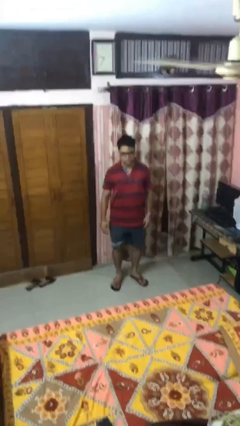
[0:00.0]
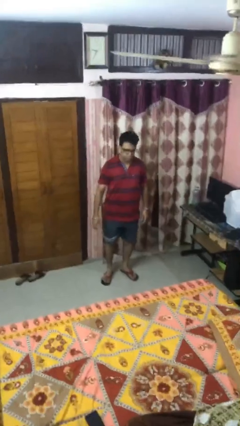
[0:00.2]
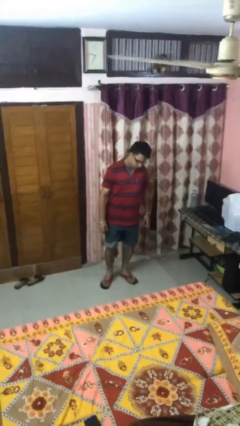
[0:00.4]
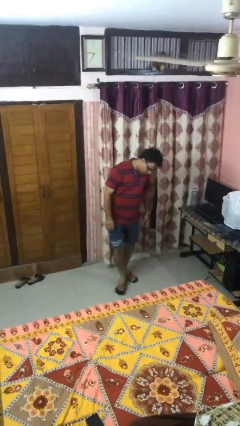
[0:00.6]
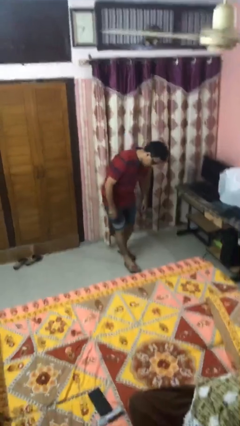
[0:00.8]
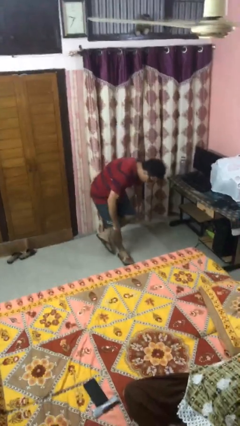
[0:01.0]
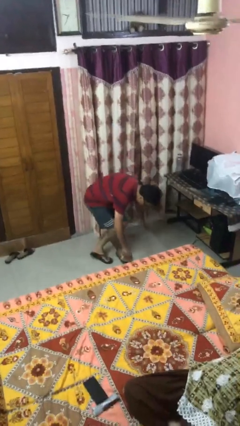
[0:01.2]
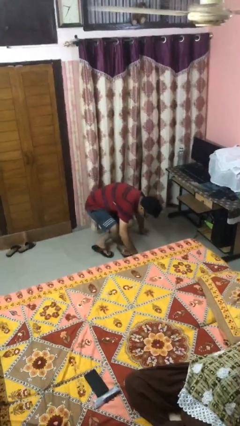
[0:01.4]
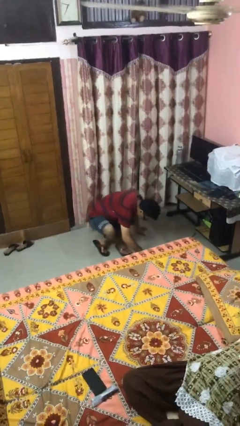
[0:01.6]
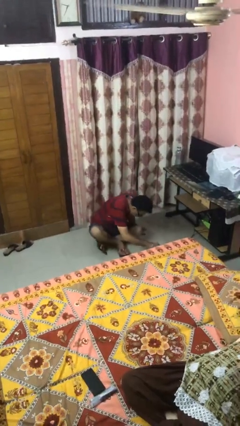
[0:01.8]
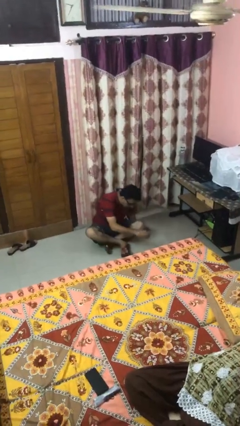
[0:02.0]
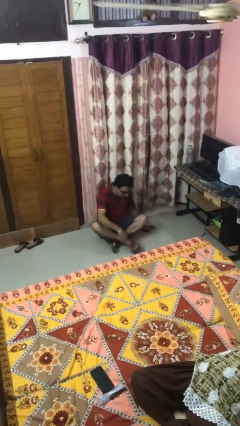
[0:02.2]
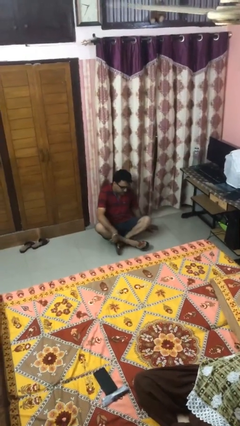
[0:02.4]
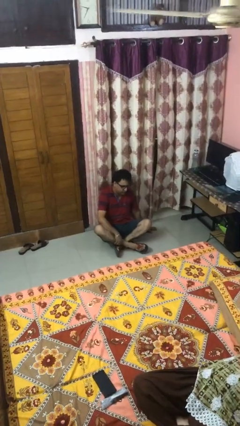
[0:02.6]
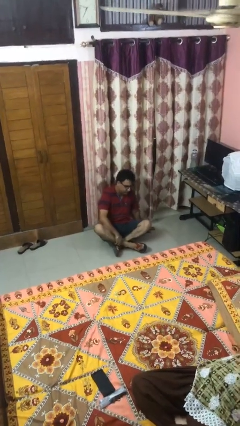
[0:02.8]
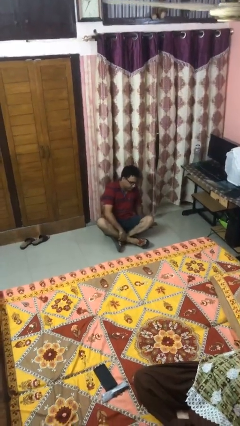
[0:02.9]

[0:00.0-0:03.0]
person sits crisscross

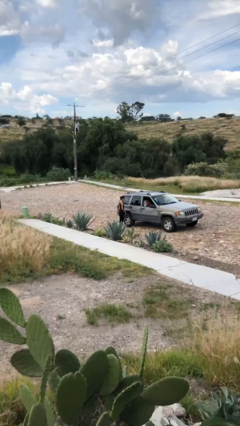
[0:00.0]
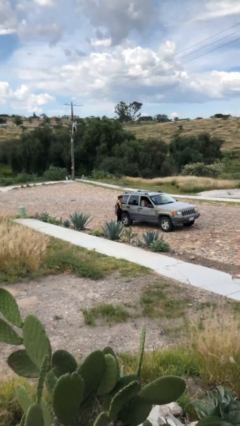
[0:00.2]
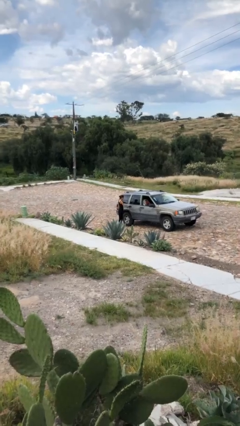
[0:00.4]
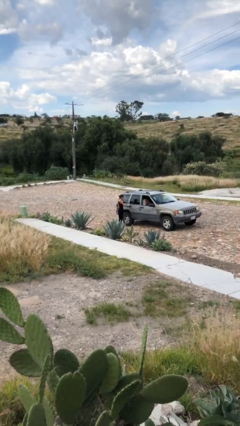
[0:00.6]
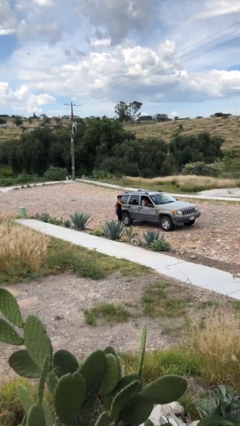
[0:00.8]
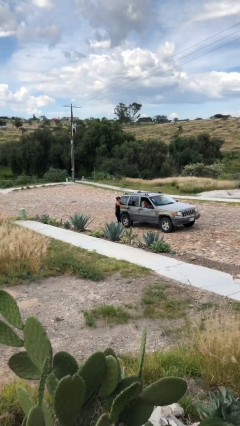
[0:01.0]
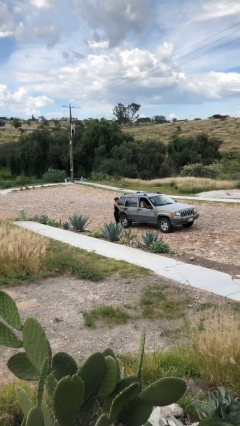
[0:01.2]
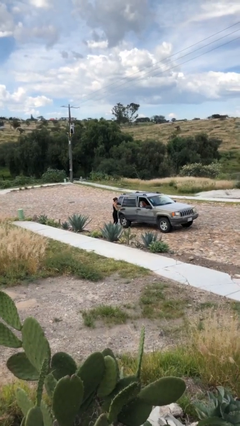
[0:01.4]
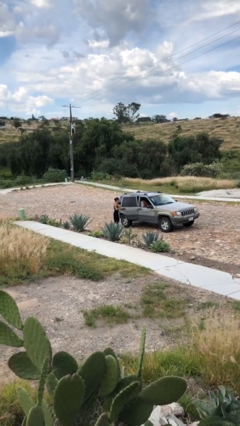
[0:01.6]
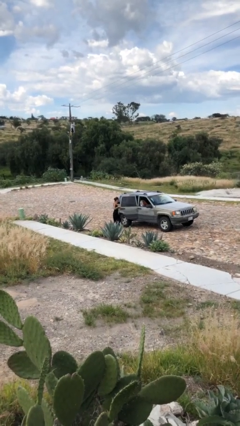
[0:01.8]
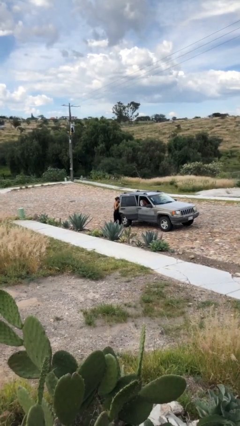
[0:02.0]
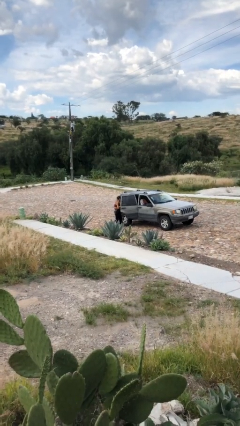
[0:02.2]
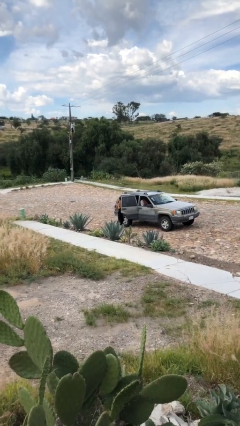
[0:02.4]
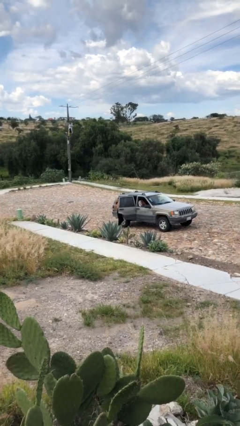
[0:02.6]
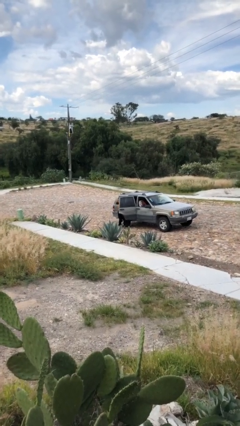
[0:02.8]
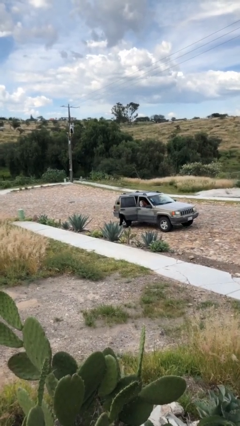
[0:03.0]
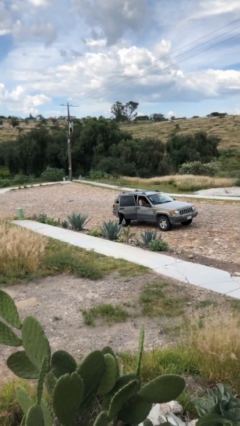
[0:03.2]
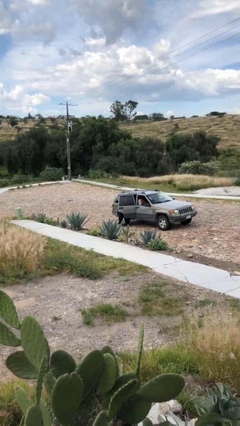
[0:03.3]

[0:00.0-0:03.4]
person opens car door

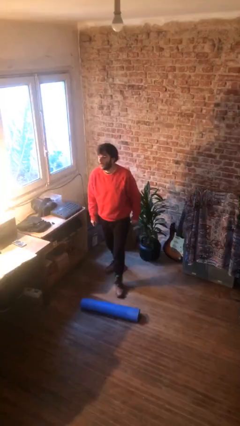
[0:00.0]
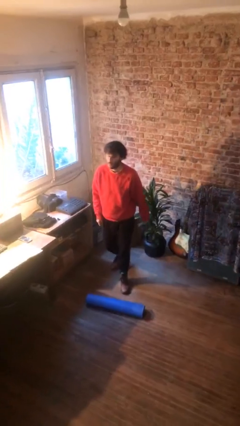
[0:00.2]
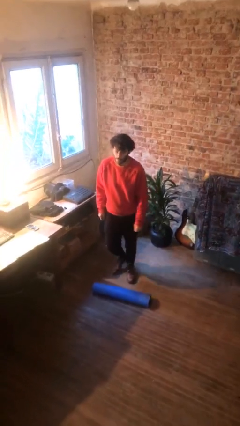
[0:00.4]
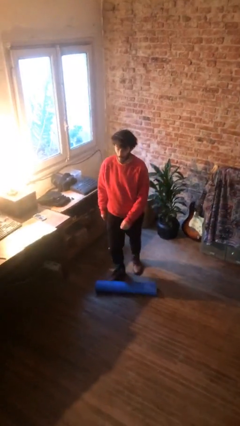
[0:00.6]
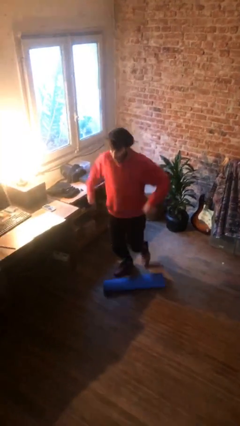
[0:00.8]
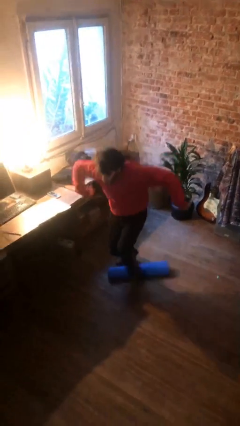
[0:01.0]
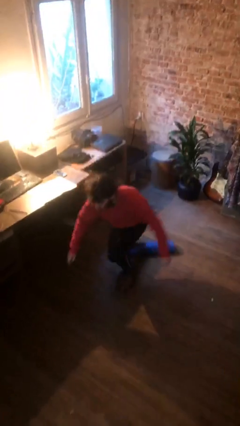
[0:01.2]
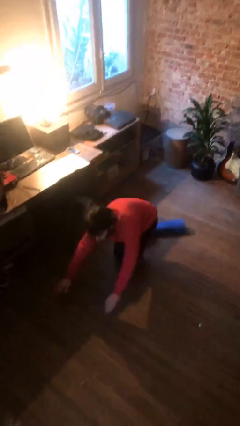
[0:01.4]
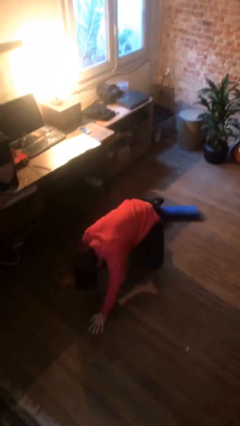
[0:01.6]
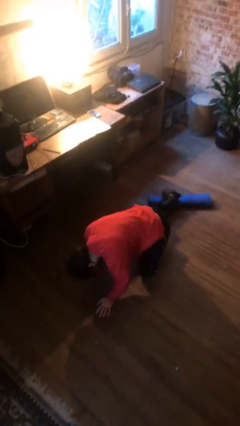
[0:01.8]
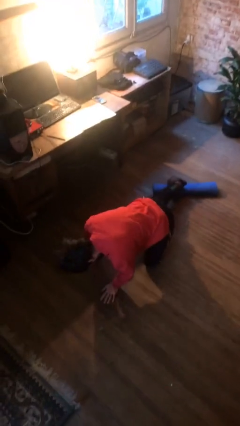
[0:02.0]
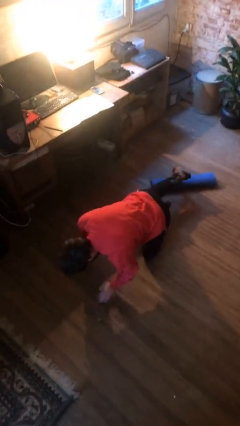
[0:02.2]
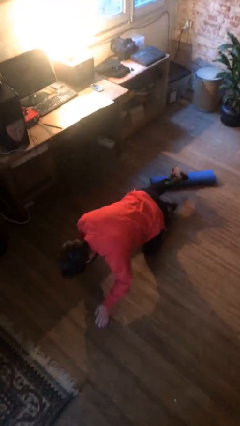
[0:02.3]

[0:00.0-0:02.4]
person trips on object on floor

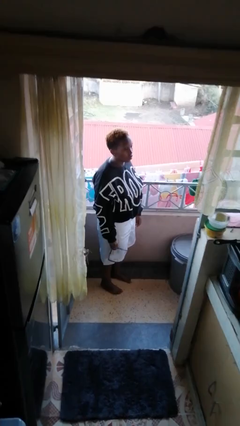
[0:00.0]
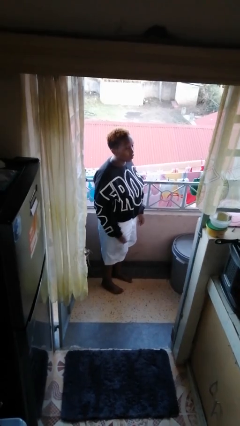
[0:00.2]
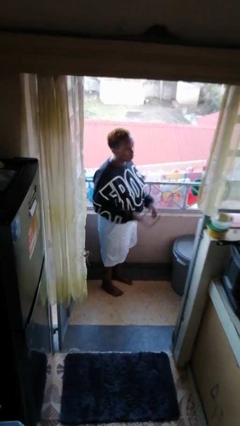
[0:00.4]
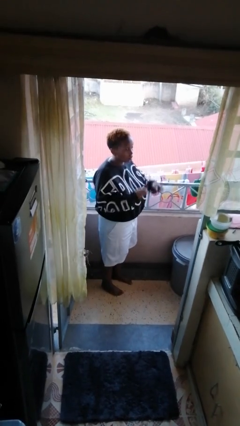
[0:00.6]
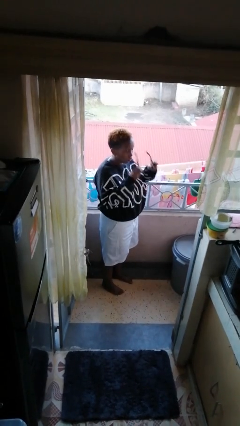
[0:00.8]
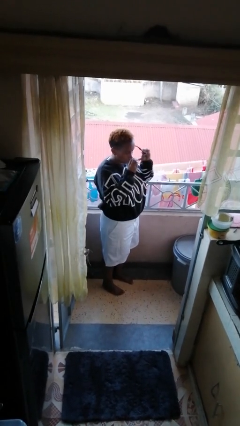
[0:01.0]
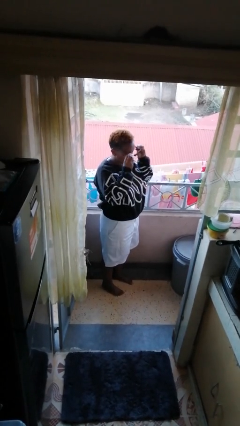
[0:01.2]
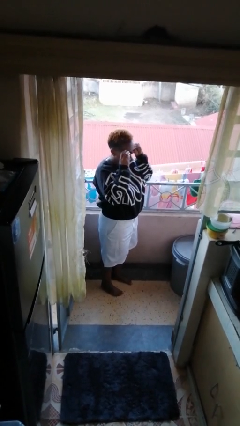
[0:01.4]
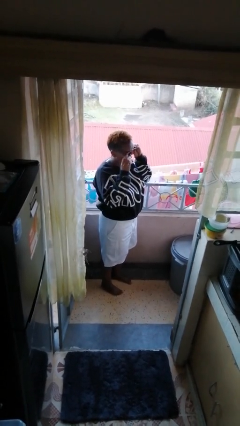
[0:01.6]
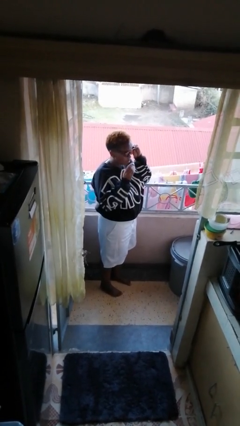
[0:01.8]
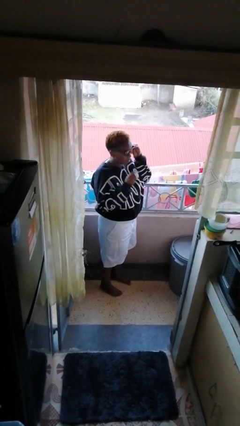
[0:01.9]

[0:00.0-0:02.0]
person puts on sunglasses

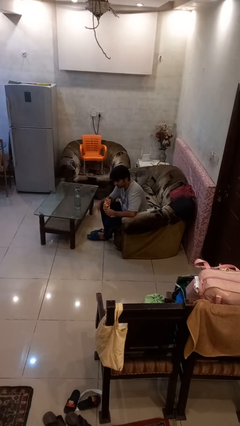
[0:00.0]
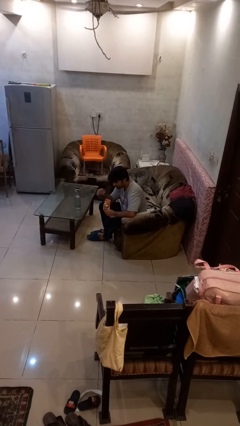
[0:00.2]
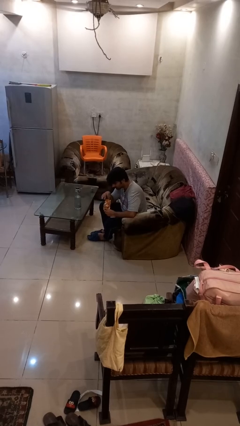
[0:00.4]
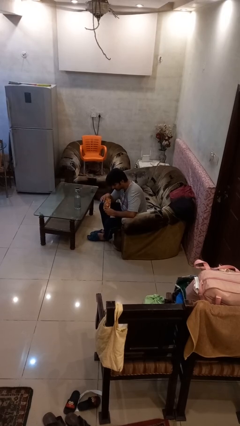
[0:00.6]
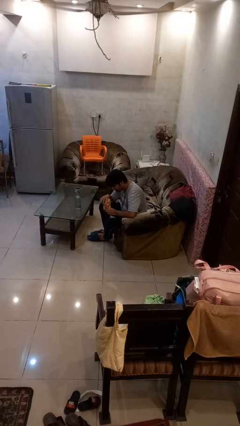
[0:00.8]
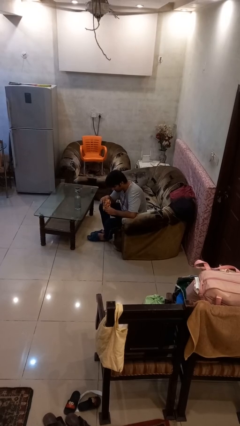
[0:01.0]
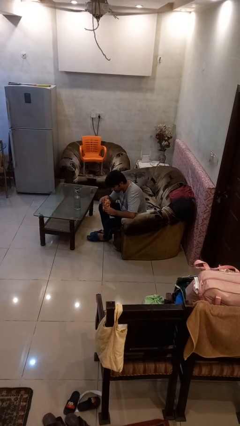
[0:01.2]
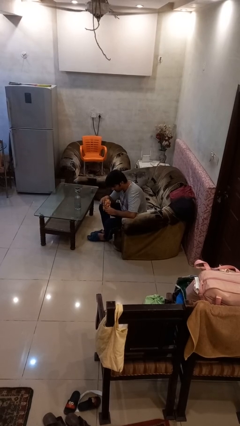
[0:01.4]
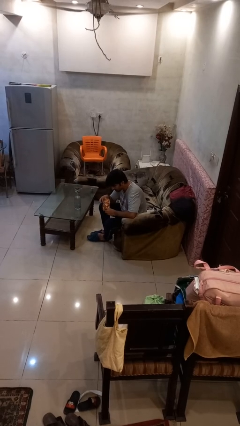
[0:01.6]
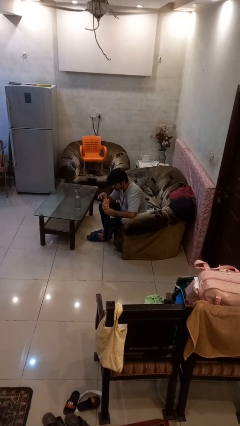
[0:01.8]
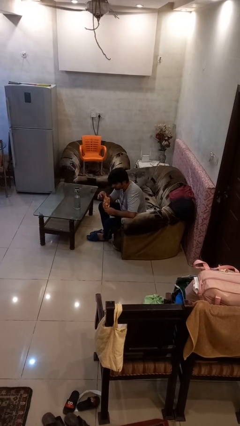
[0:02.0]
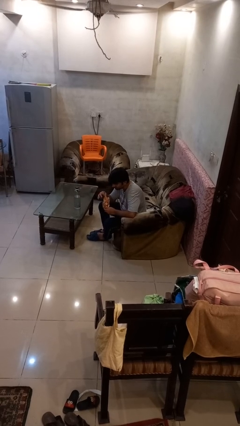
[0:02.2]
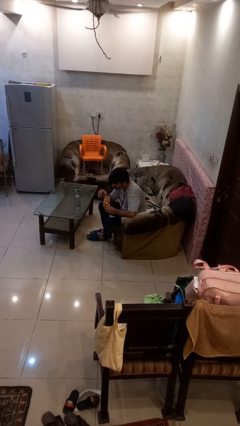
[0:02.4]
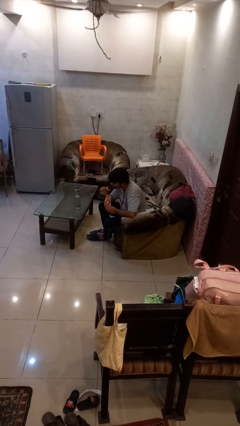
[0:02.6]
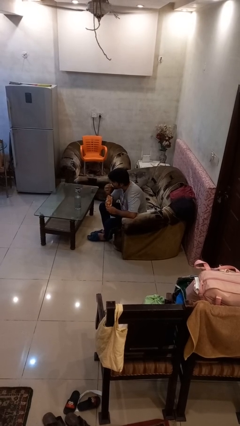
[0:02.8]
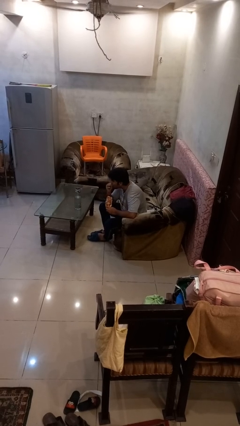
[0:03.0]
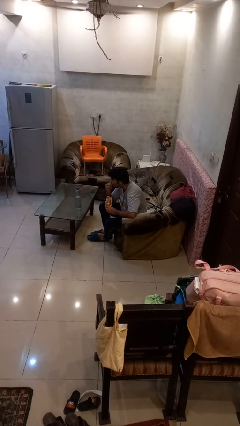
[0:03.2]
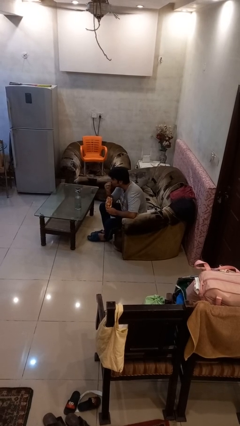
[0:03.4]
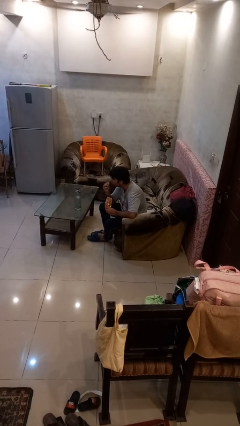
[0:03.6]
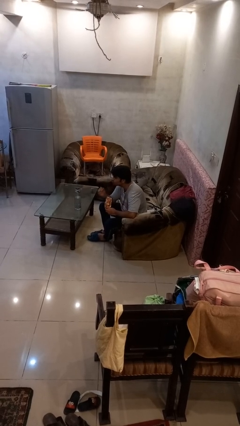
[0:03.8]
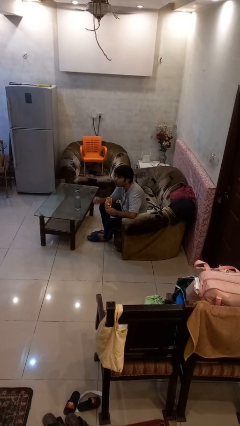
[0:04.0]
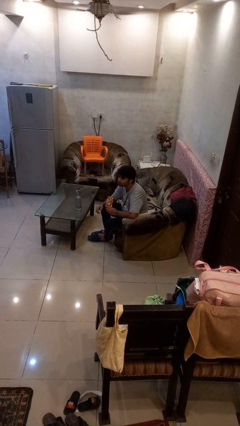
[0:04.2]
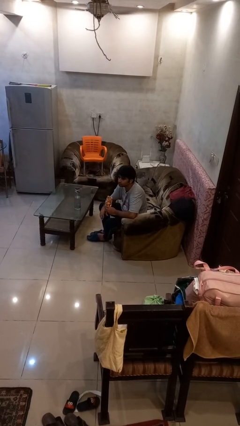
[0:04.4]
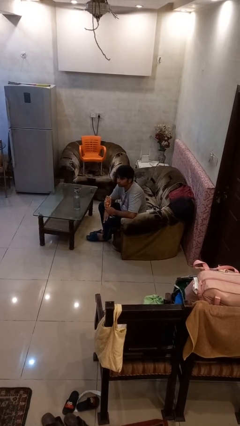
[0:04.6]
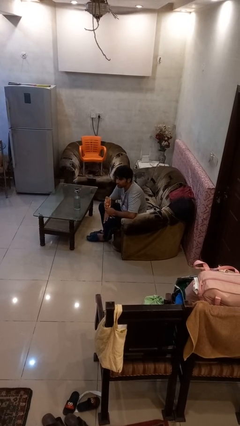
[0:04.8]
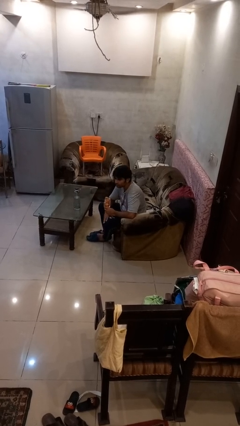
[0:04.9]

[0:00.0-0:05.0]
person eats snack from bag

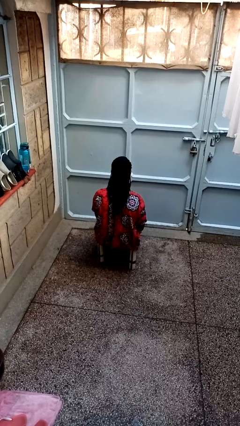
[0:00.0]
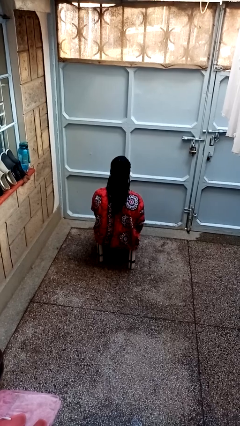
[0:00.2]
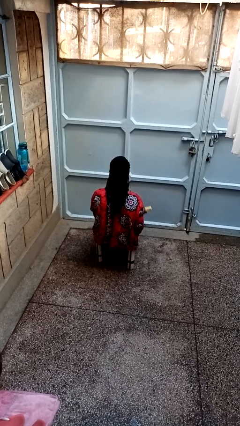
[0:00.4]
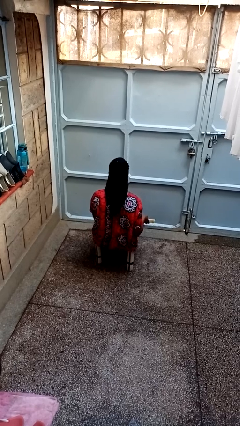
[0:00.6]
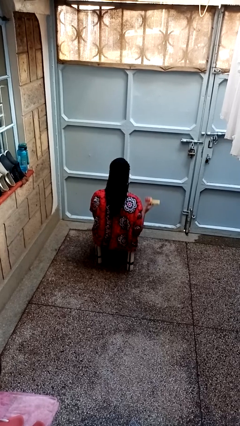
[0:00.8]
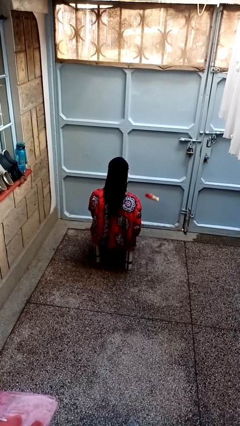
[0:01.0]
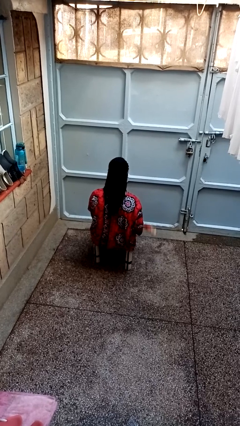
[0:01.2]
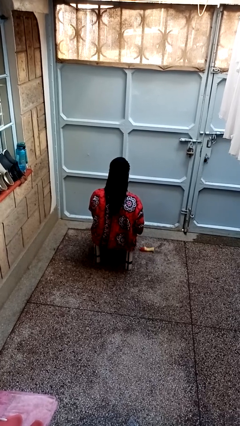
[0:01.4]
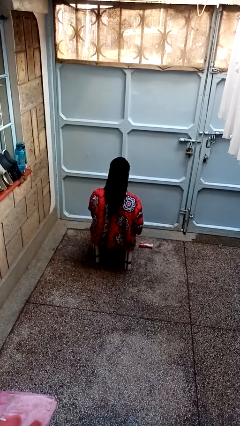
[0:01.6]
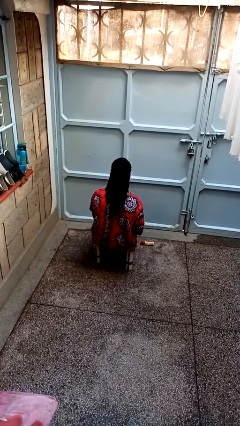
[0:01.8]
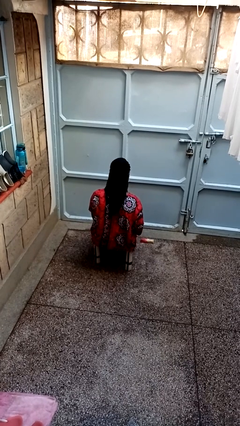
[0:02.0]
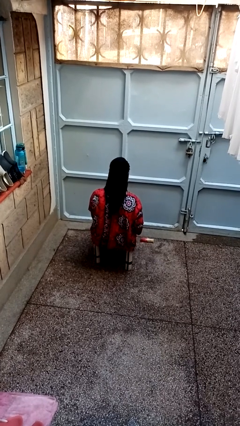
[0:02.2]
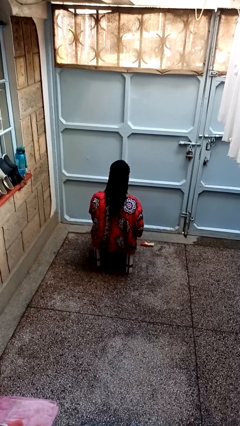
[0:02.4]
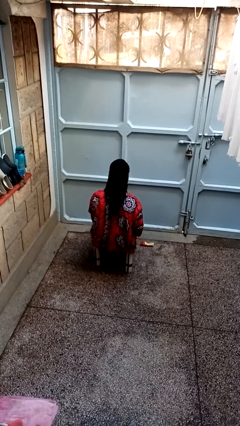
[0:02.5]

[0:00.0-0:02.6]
person throws object into air
